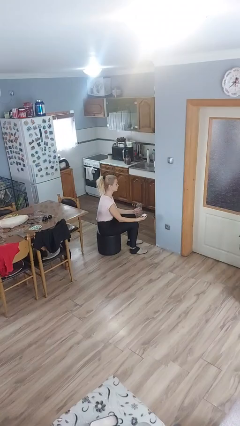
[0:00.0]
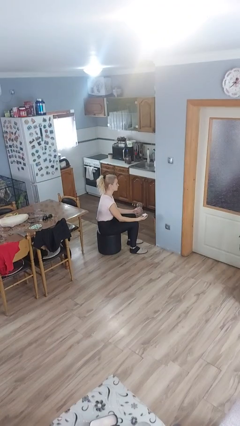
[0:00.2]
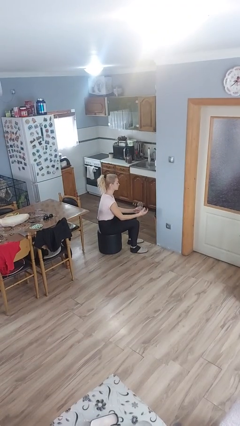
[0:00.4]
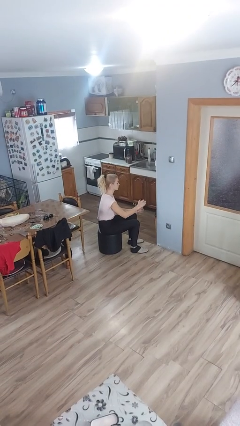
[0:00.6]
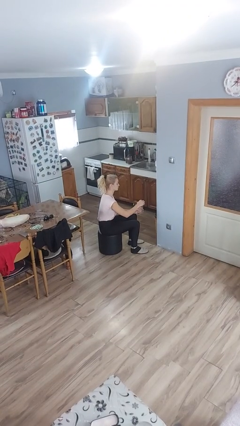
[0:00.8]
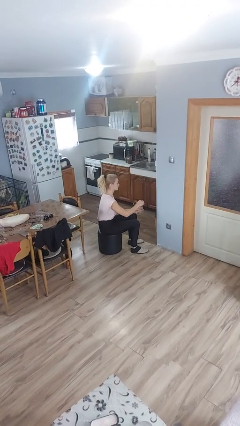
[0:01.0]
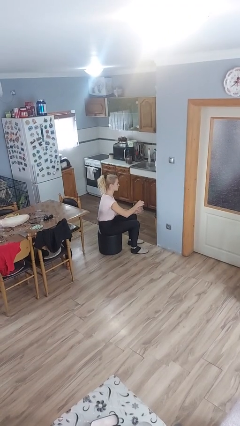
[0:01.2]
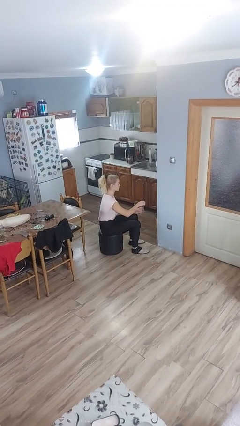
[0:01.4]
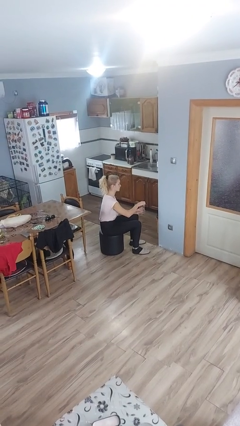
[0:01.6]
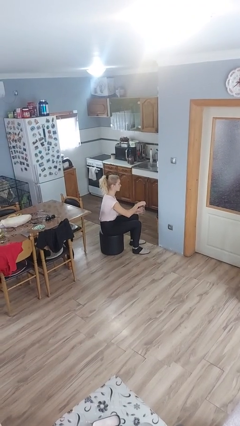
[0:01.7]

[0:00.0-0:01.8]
person closes jar

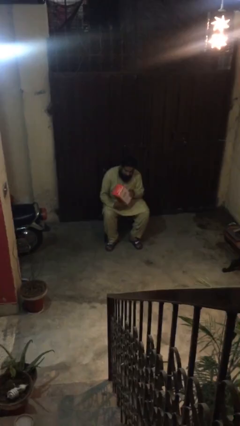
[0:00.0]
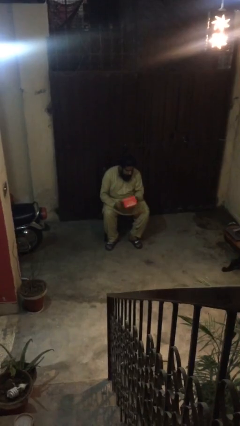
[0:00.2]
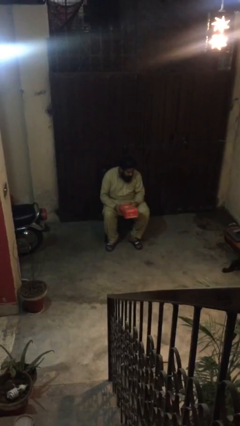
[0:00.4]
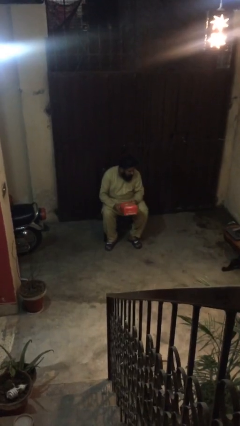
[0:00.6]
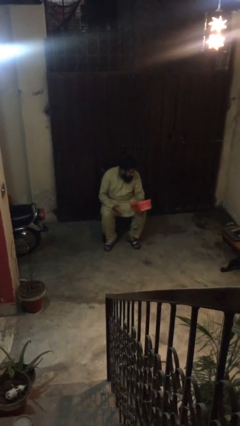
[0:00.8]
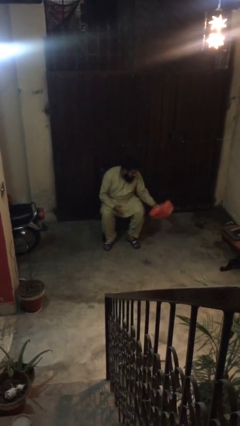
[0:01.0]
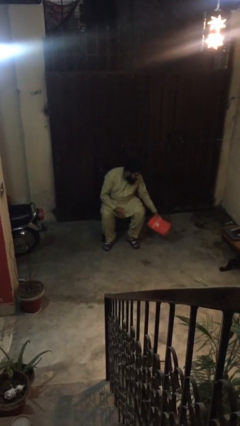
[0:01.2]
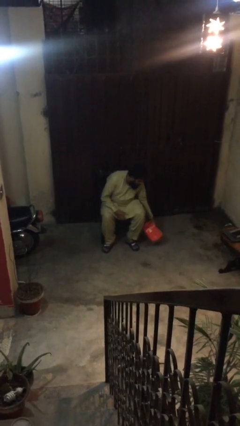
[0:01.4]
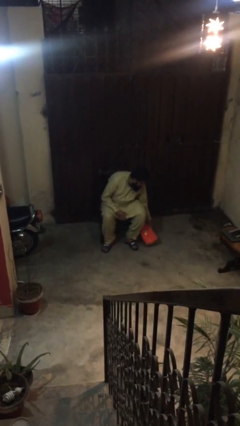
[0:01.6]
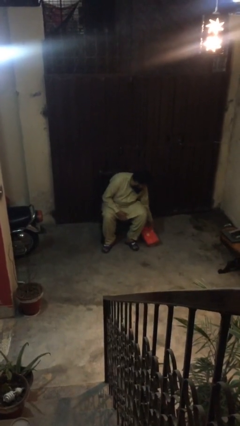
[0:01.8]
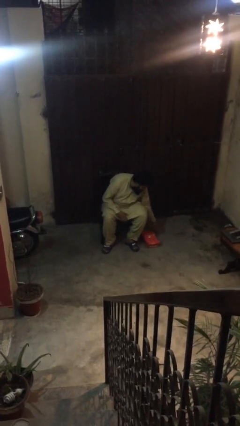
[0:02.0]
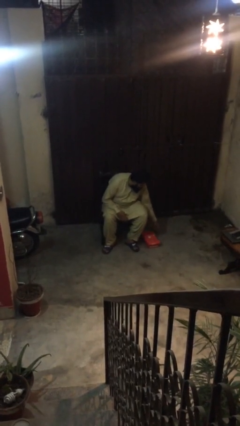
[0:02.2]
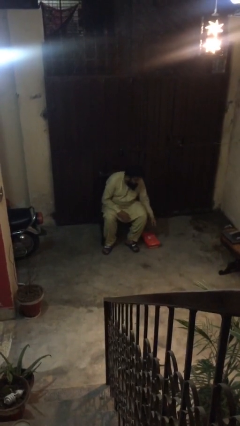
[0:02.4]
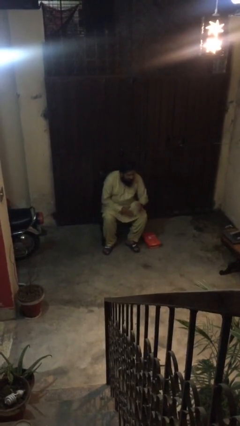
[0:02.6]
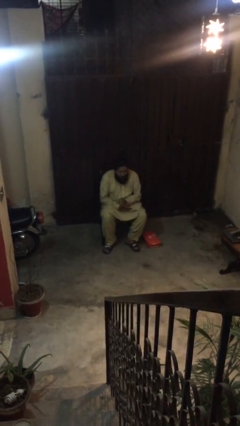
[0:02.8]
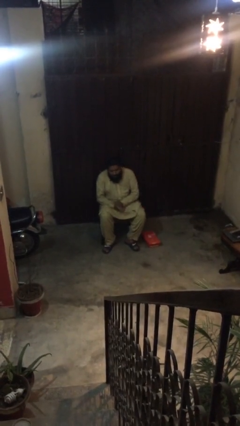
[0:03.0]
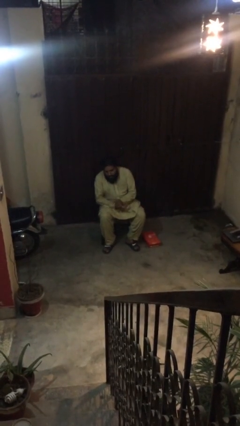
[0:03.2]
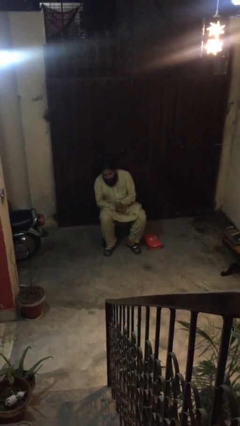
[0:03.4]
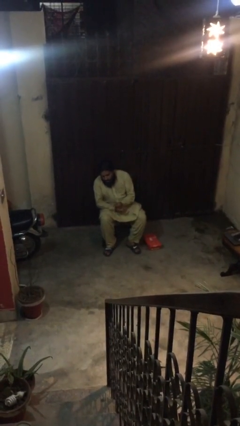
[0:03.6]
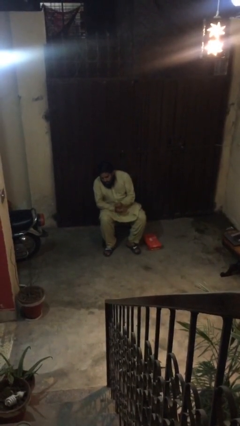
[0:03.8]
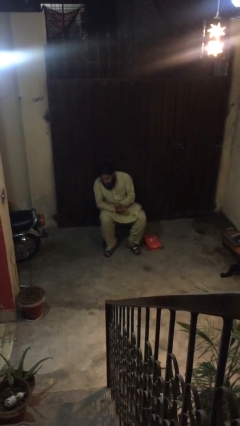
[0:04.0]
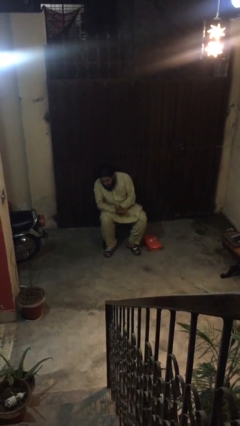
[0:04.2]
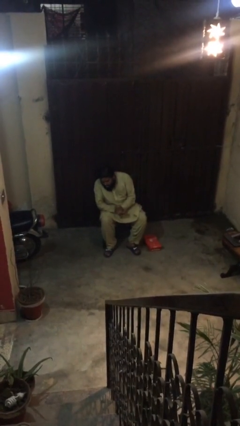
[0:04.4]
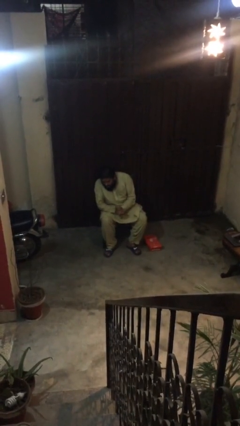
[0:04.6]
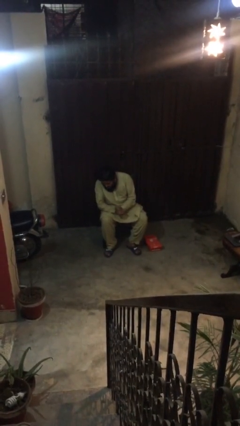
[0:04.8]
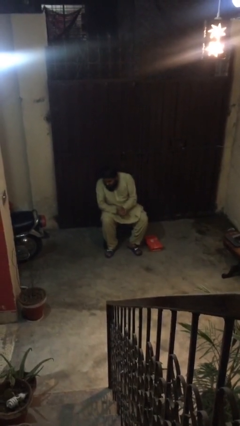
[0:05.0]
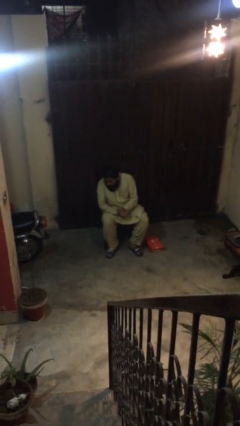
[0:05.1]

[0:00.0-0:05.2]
person puts down object on floor

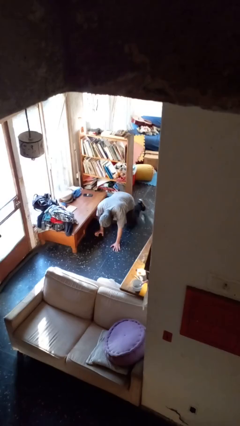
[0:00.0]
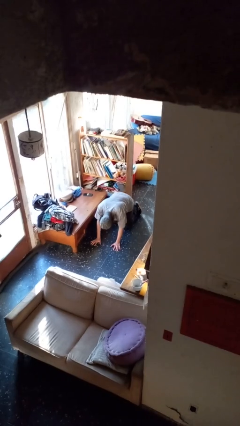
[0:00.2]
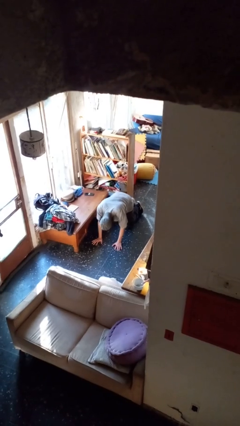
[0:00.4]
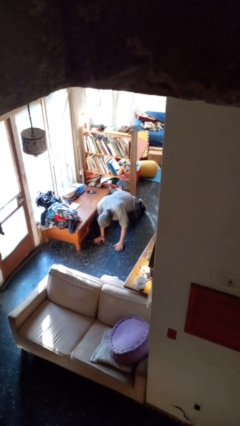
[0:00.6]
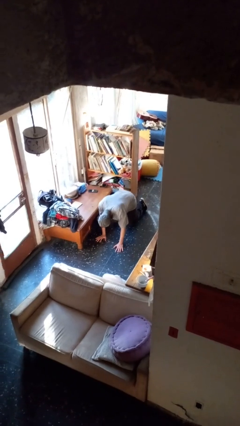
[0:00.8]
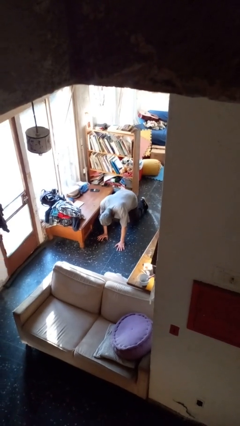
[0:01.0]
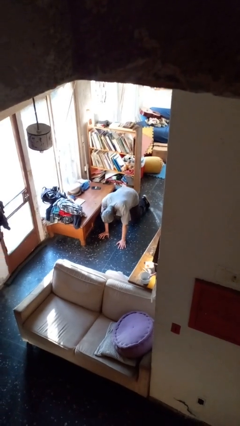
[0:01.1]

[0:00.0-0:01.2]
person crawls

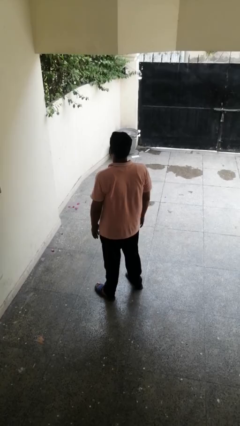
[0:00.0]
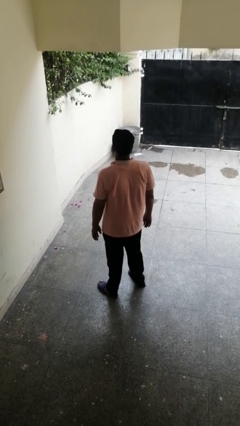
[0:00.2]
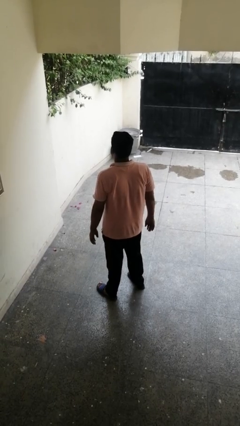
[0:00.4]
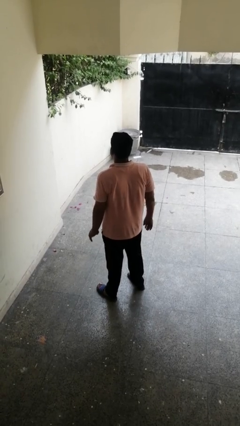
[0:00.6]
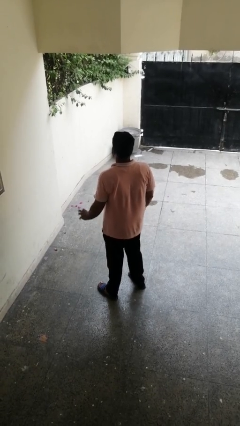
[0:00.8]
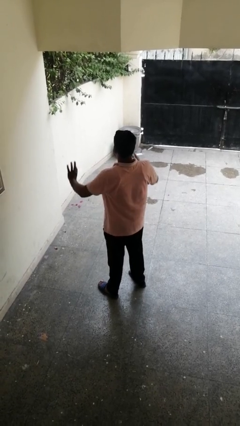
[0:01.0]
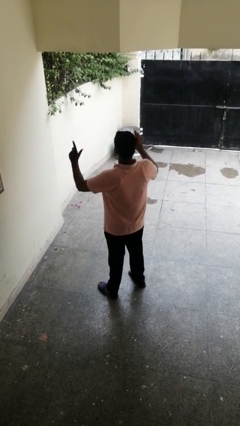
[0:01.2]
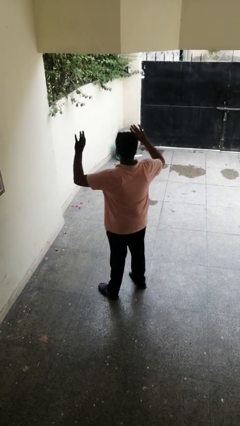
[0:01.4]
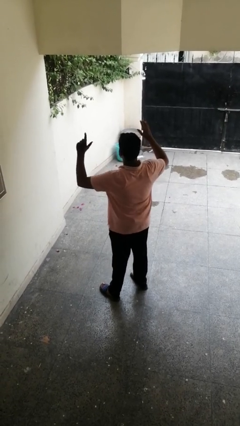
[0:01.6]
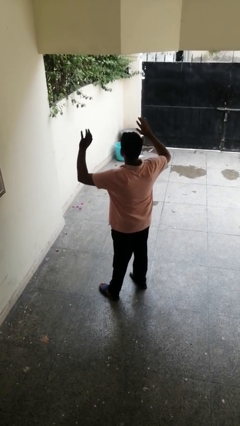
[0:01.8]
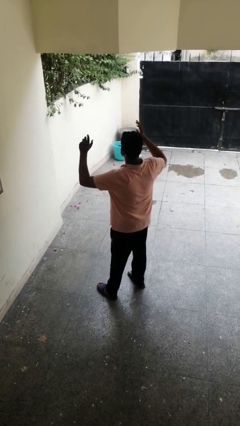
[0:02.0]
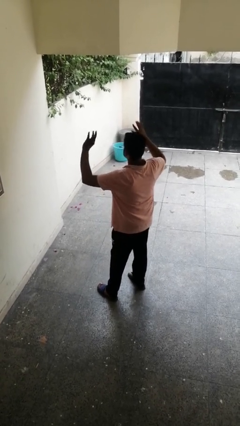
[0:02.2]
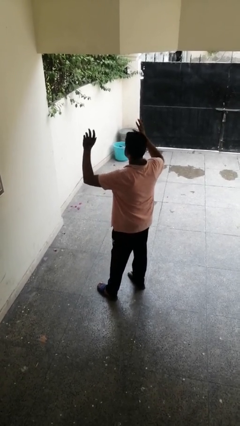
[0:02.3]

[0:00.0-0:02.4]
person dances in place

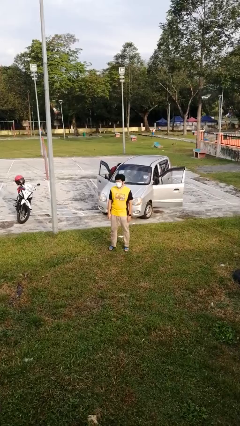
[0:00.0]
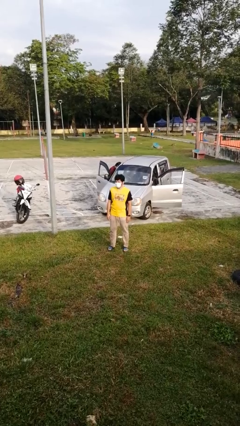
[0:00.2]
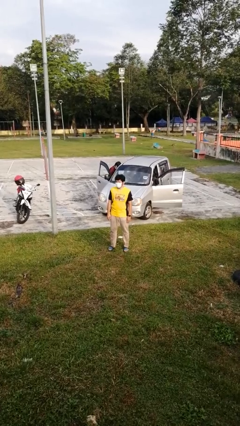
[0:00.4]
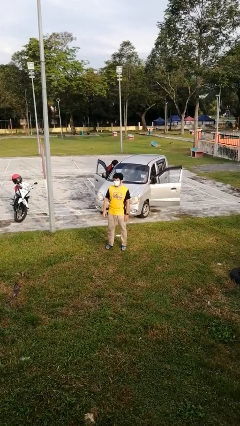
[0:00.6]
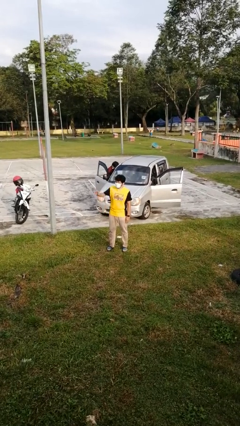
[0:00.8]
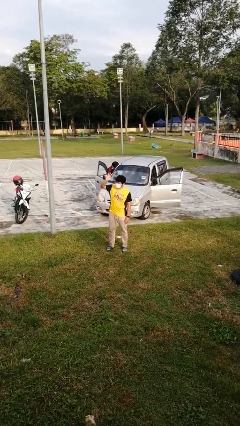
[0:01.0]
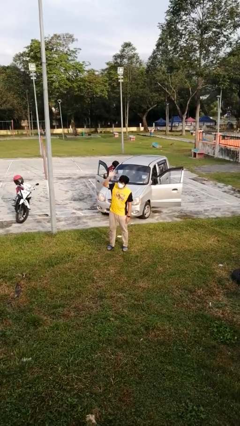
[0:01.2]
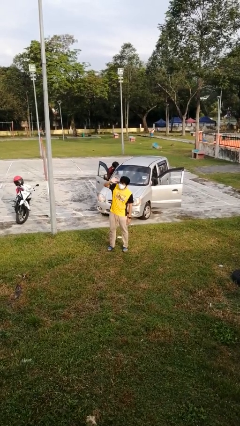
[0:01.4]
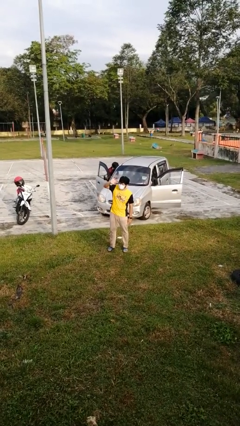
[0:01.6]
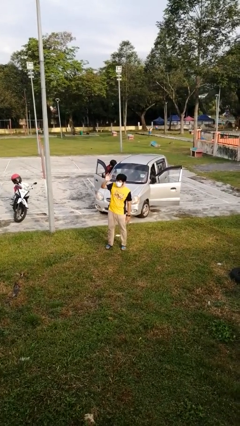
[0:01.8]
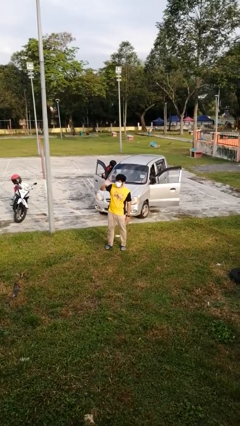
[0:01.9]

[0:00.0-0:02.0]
person waves at person

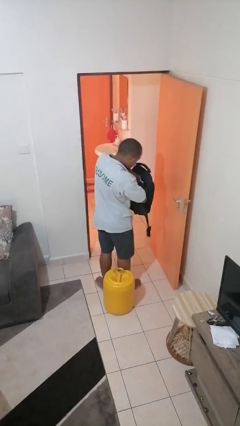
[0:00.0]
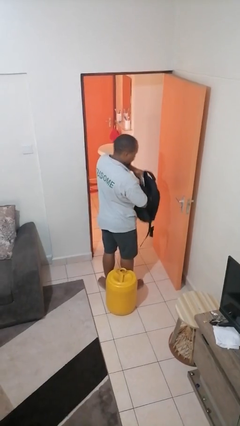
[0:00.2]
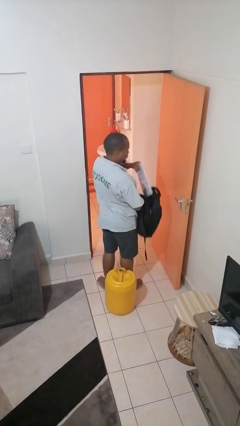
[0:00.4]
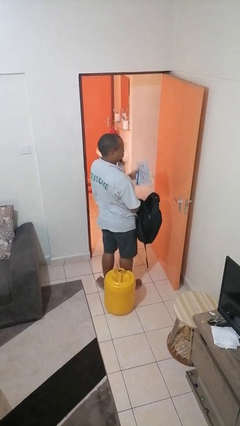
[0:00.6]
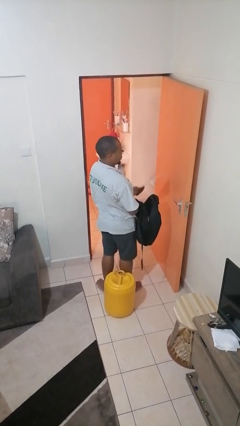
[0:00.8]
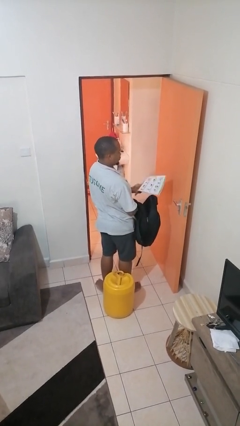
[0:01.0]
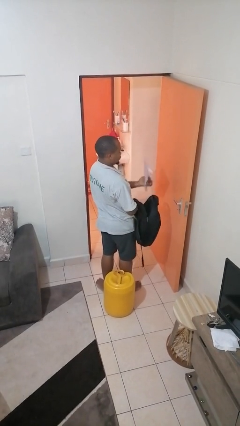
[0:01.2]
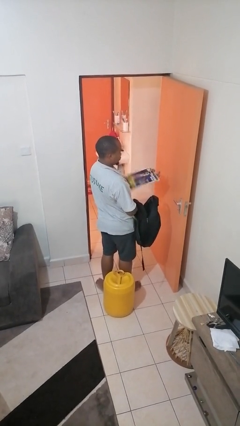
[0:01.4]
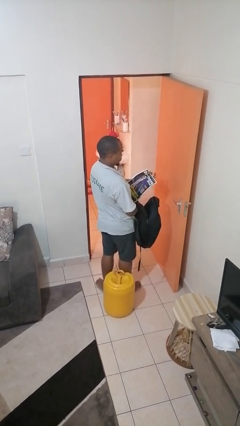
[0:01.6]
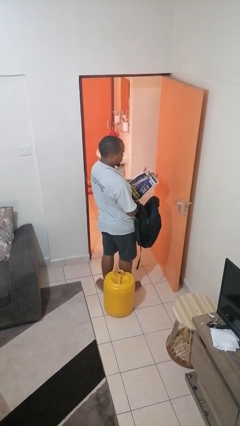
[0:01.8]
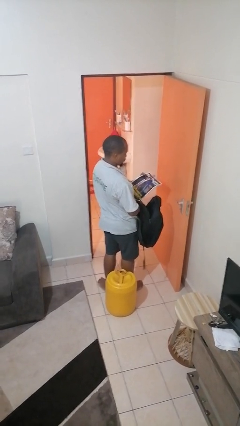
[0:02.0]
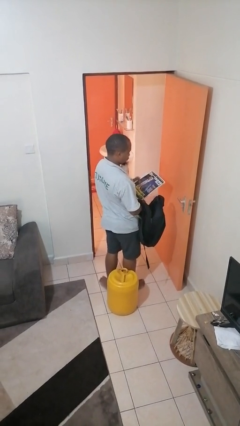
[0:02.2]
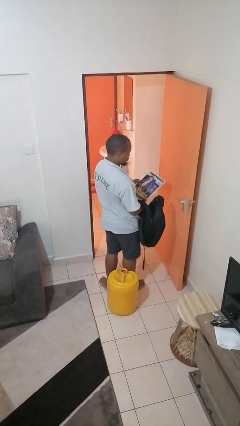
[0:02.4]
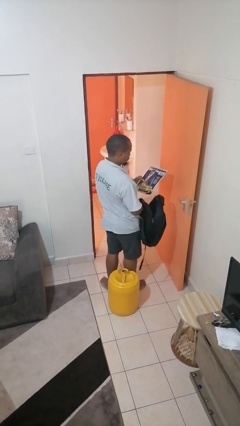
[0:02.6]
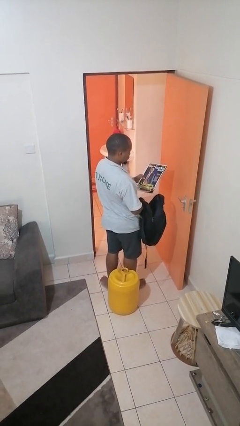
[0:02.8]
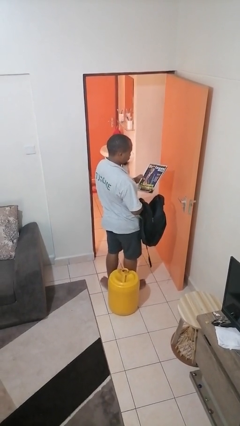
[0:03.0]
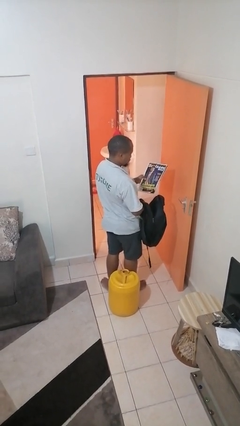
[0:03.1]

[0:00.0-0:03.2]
person takes object from backpack

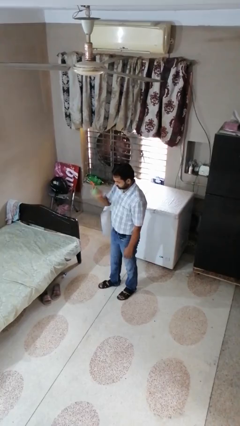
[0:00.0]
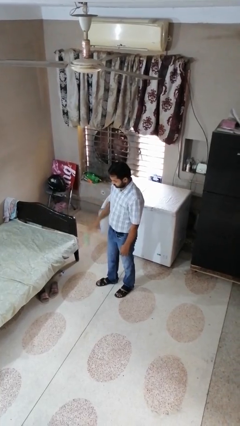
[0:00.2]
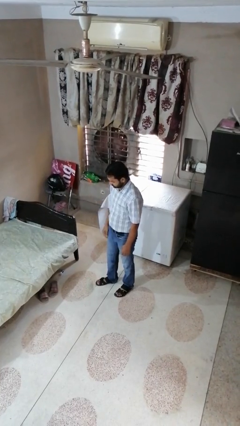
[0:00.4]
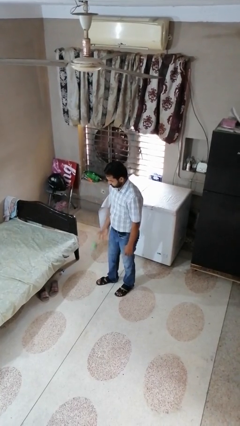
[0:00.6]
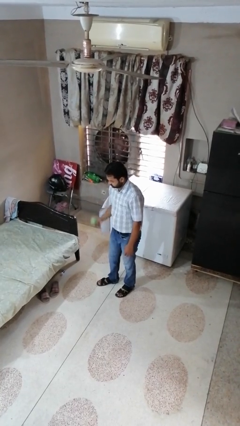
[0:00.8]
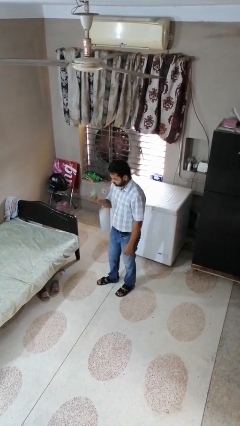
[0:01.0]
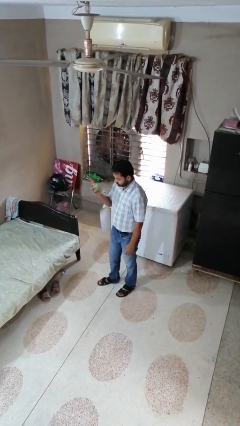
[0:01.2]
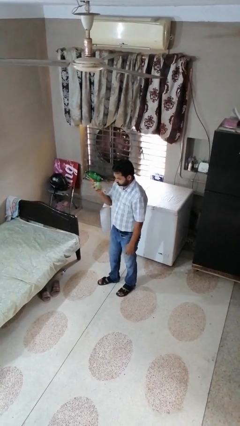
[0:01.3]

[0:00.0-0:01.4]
person bounces ball on floor
